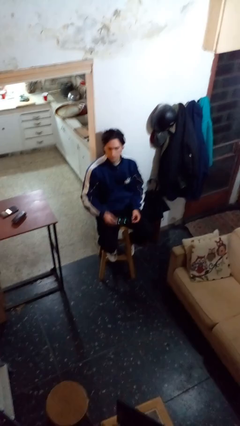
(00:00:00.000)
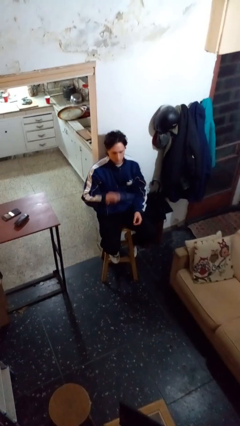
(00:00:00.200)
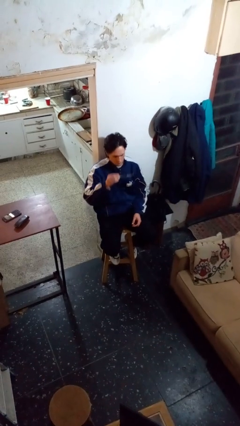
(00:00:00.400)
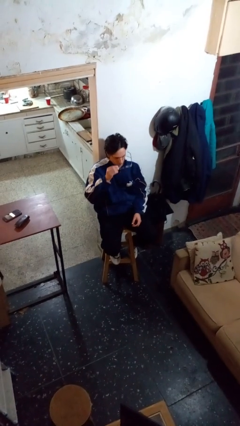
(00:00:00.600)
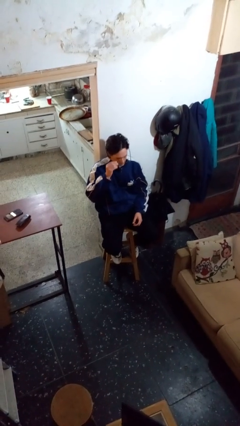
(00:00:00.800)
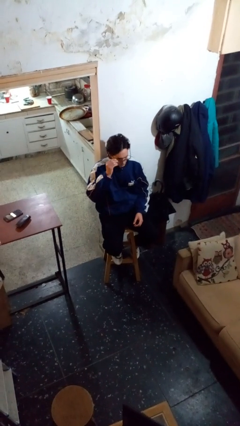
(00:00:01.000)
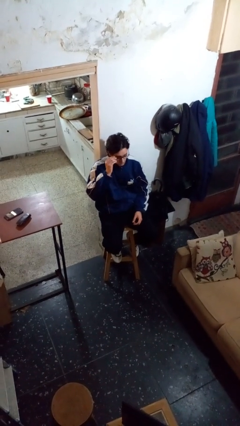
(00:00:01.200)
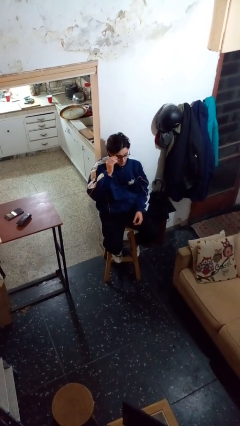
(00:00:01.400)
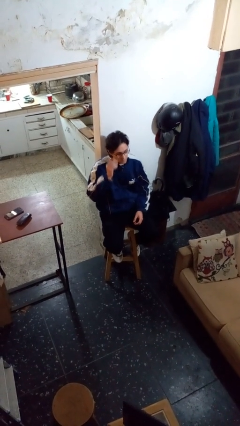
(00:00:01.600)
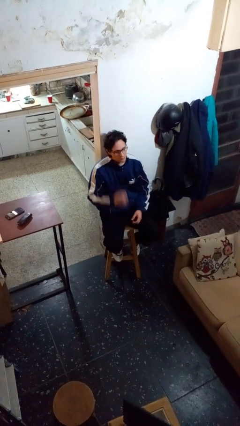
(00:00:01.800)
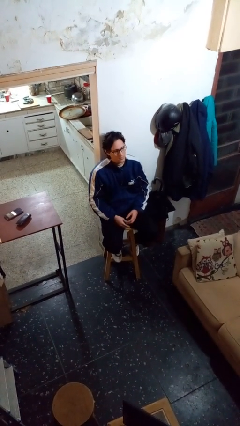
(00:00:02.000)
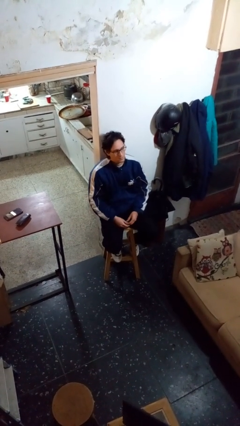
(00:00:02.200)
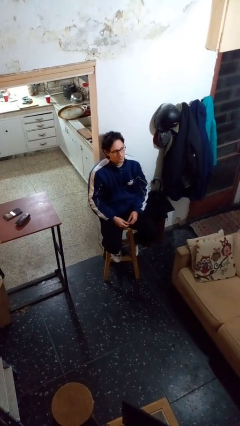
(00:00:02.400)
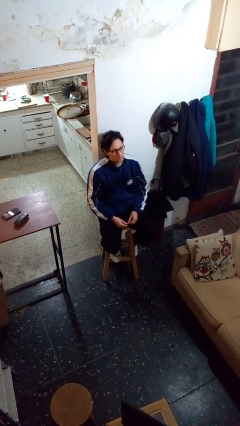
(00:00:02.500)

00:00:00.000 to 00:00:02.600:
person puts on glasses

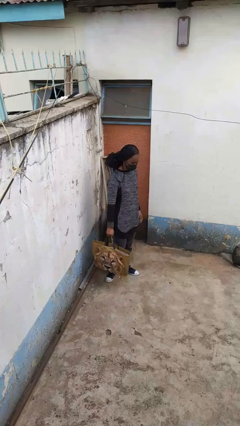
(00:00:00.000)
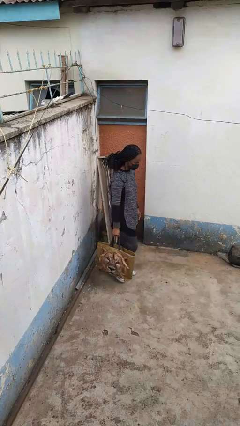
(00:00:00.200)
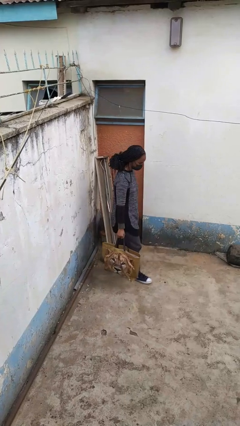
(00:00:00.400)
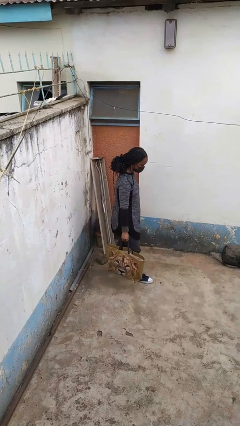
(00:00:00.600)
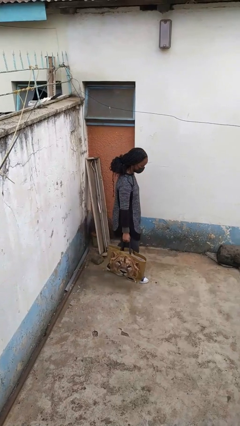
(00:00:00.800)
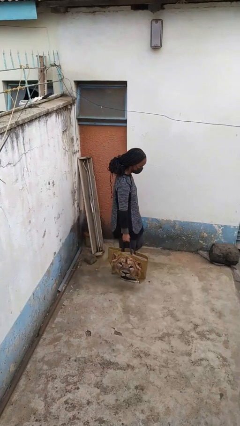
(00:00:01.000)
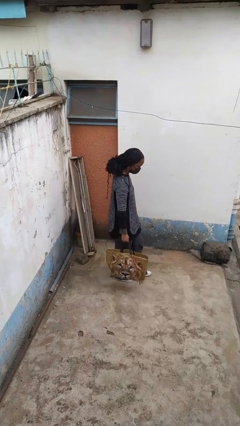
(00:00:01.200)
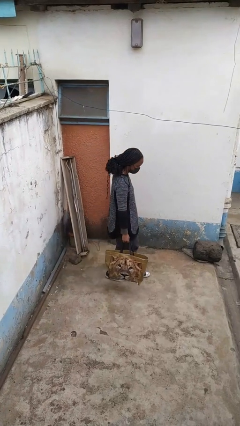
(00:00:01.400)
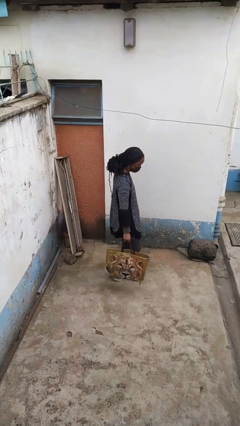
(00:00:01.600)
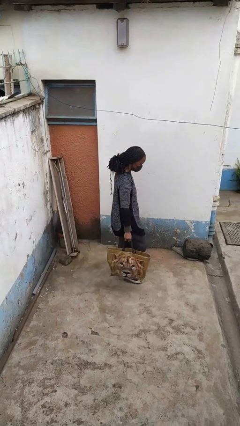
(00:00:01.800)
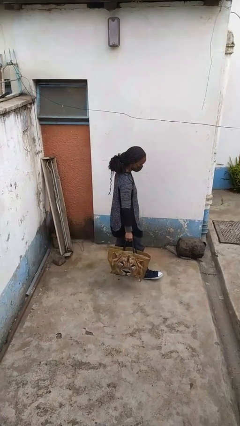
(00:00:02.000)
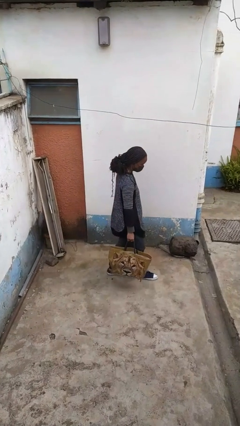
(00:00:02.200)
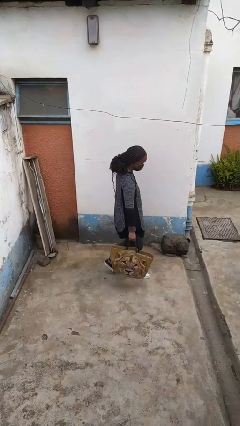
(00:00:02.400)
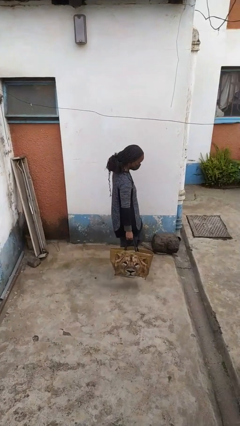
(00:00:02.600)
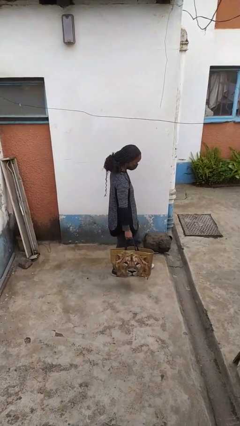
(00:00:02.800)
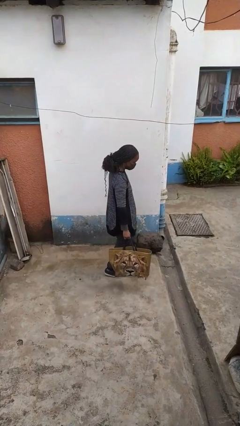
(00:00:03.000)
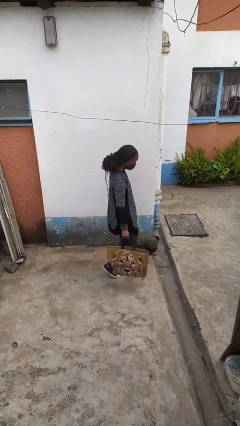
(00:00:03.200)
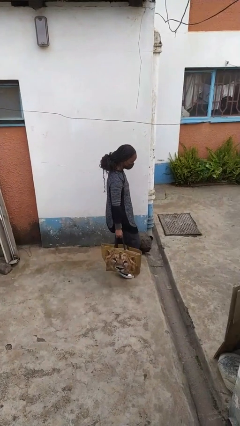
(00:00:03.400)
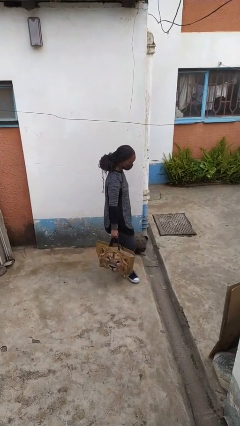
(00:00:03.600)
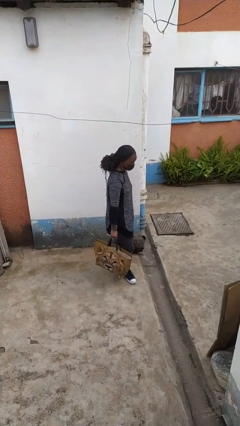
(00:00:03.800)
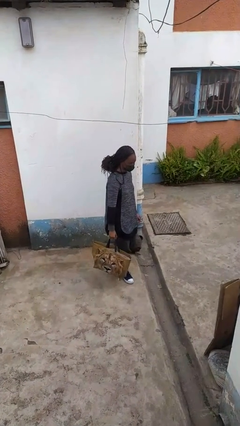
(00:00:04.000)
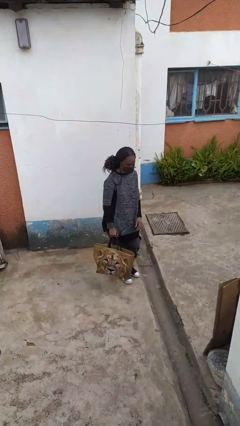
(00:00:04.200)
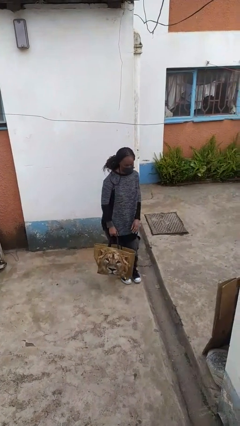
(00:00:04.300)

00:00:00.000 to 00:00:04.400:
person carries groceries

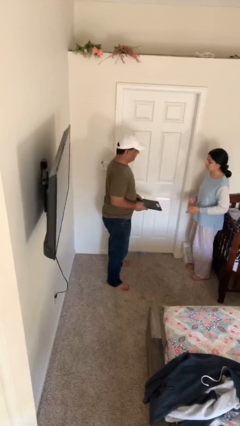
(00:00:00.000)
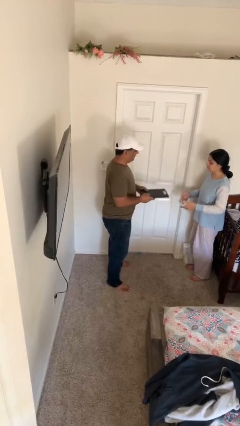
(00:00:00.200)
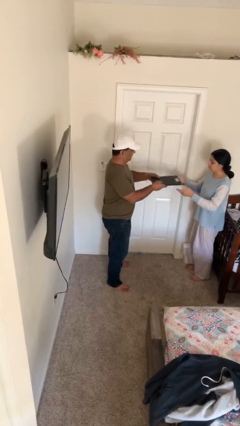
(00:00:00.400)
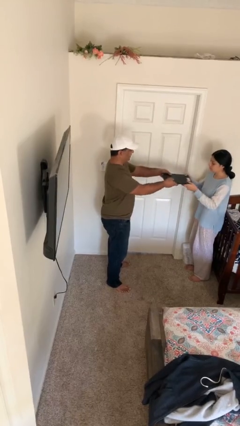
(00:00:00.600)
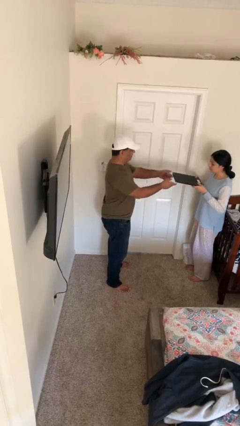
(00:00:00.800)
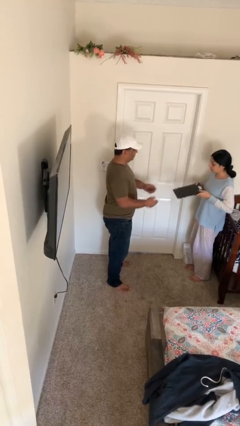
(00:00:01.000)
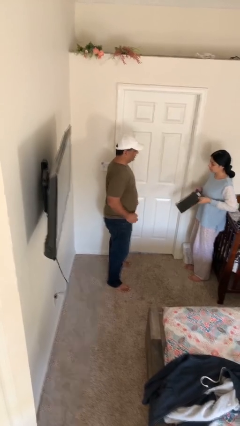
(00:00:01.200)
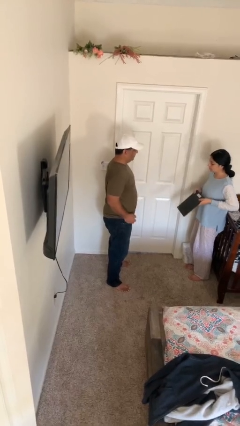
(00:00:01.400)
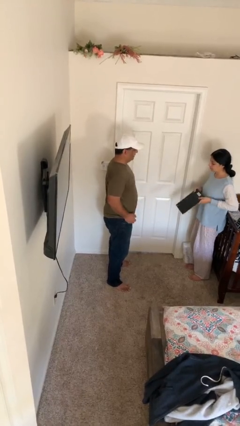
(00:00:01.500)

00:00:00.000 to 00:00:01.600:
person transfers object to person

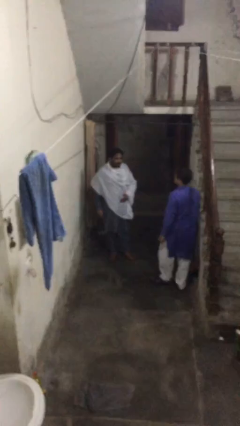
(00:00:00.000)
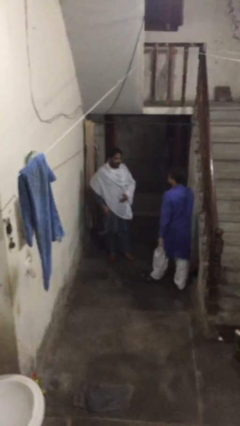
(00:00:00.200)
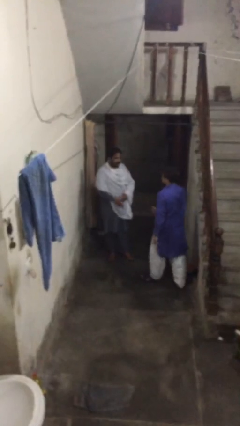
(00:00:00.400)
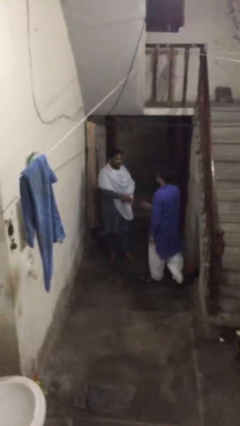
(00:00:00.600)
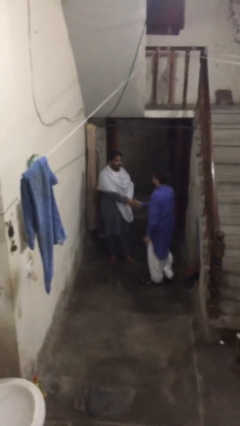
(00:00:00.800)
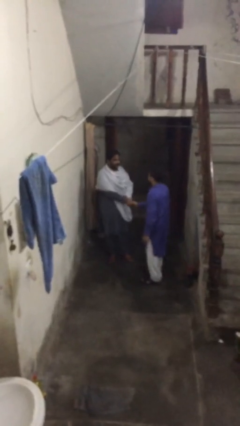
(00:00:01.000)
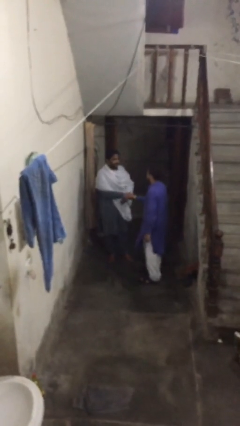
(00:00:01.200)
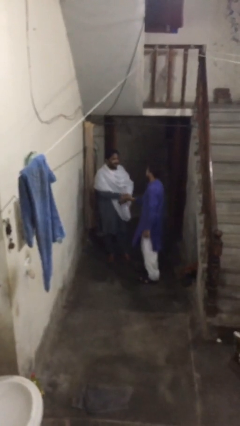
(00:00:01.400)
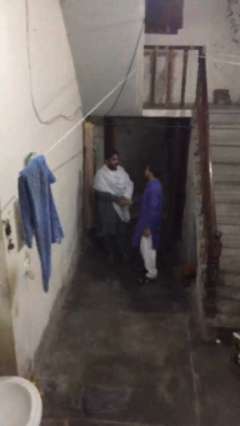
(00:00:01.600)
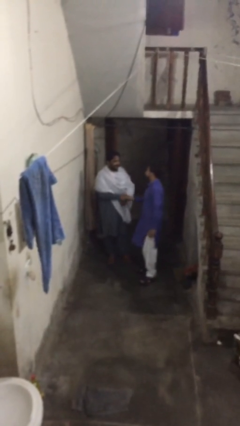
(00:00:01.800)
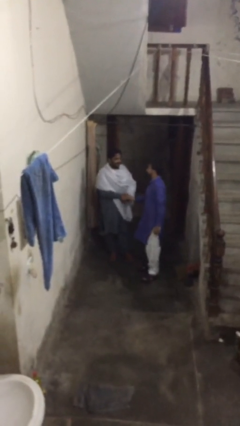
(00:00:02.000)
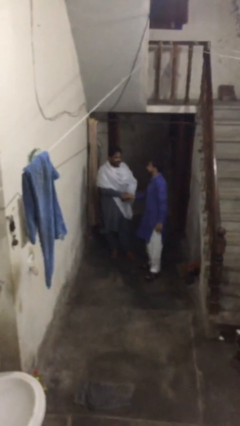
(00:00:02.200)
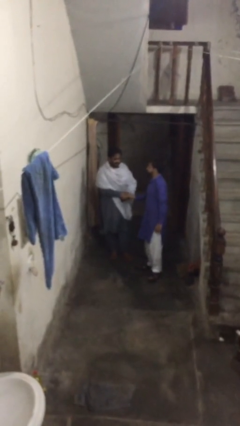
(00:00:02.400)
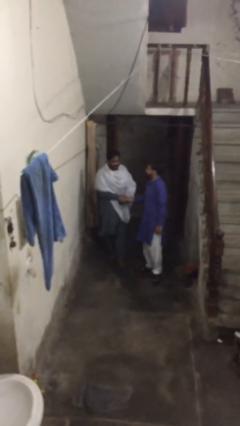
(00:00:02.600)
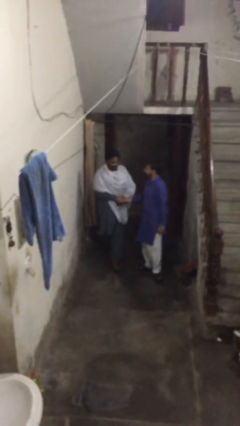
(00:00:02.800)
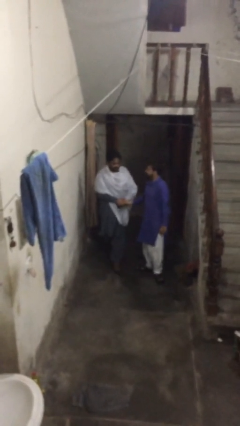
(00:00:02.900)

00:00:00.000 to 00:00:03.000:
person shakes hand

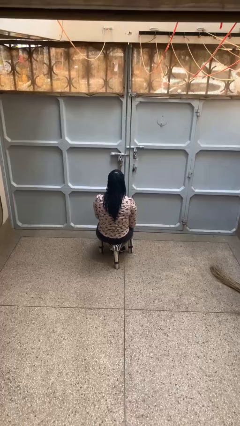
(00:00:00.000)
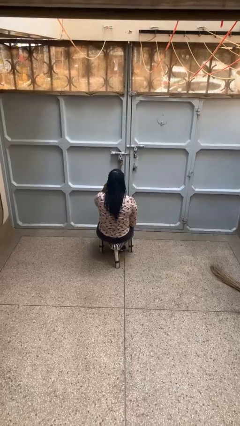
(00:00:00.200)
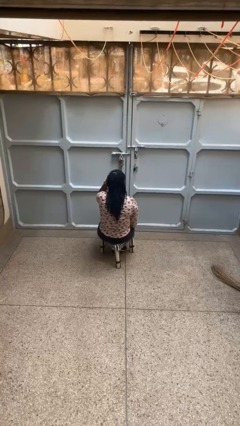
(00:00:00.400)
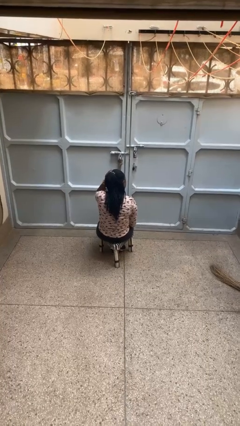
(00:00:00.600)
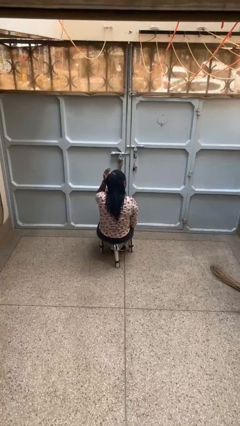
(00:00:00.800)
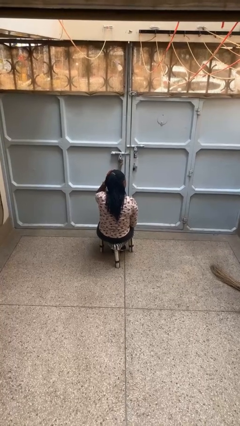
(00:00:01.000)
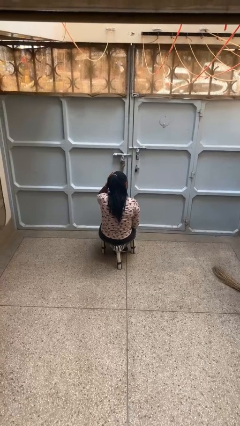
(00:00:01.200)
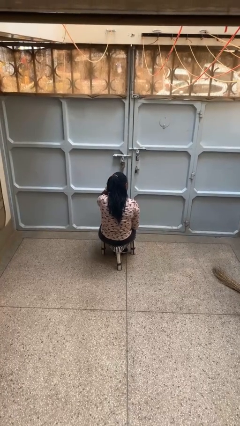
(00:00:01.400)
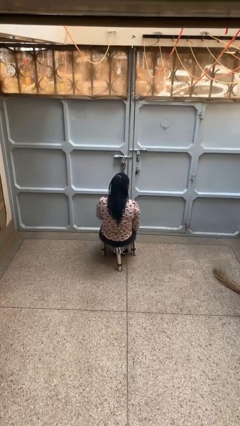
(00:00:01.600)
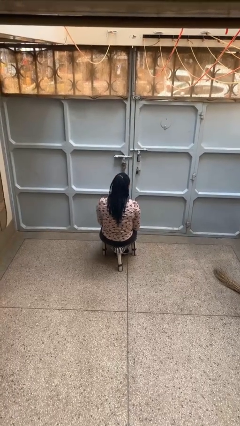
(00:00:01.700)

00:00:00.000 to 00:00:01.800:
person strokes hair

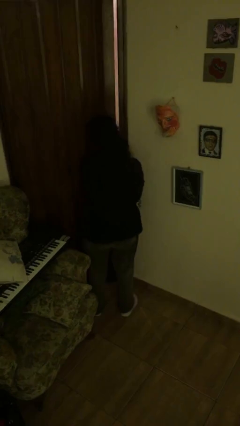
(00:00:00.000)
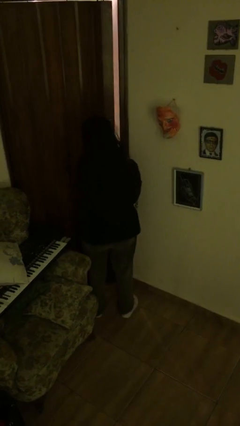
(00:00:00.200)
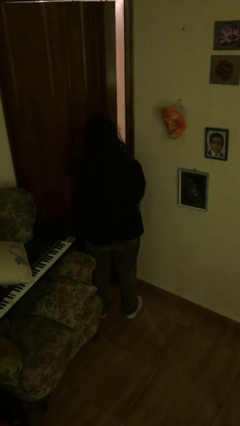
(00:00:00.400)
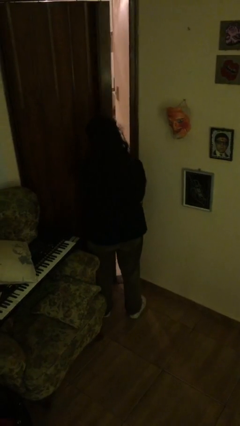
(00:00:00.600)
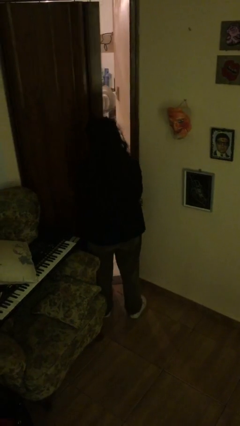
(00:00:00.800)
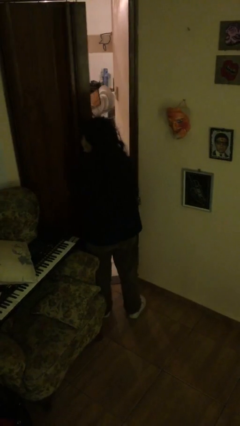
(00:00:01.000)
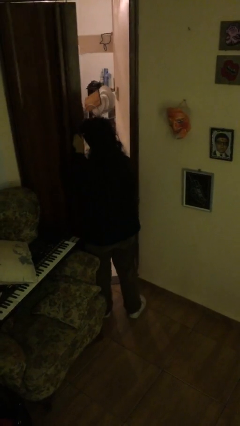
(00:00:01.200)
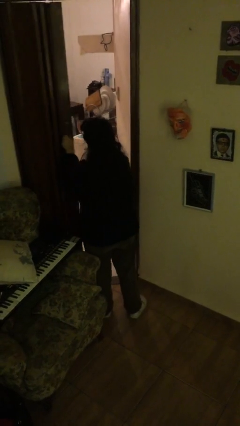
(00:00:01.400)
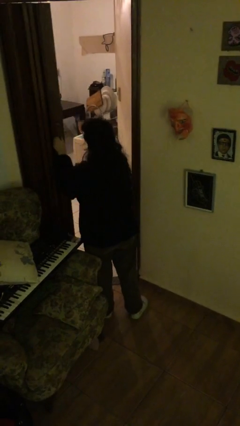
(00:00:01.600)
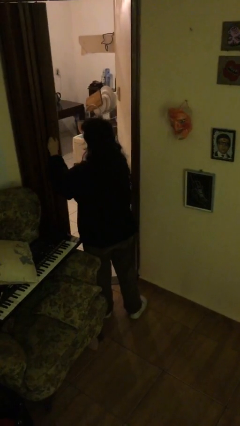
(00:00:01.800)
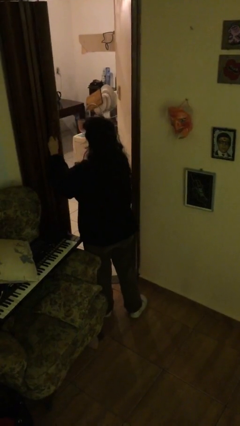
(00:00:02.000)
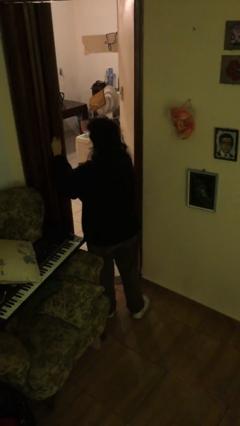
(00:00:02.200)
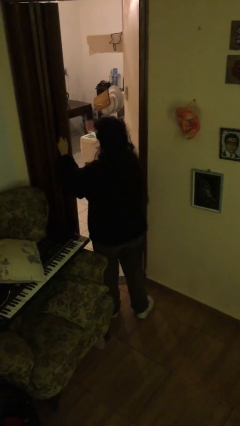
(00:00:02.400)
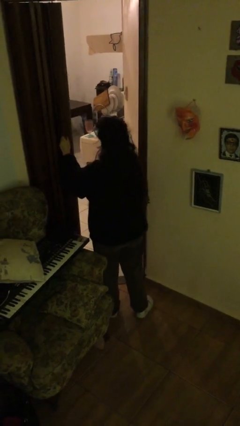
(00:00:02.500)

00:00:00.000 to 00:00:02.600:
person opens sliding door

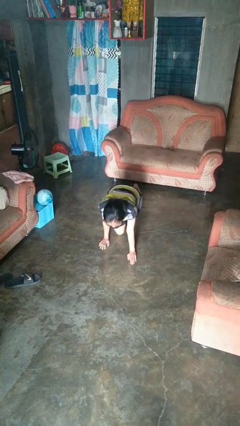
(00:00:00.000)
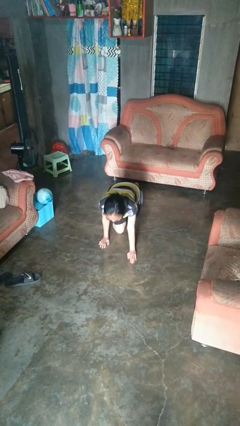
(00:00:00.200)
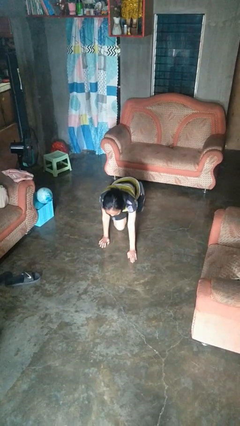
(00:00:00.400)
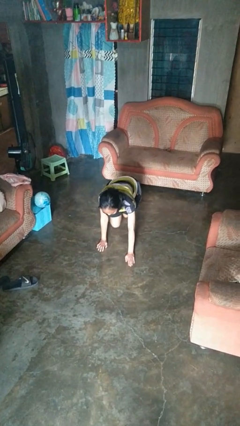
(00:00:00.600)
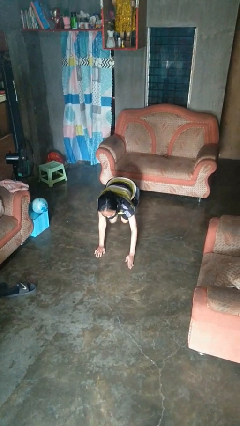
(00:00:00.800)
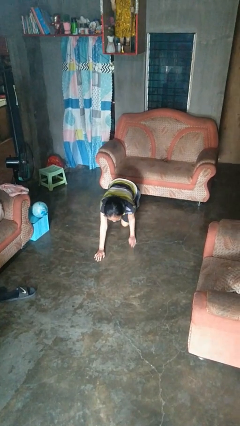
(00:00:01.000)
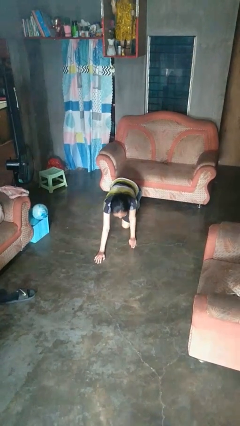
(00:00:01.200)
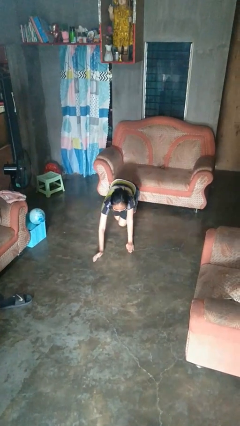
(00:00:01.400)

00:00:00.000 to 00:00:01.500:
person crawls
